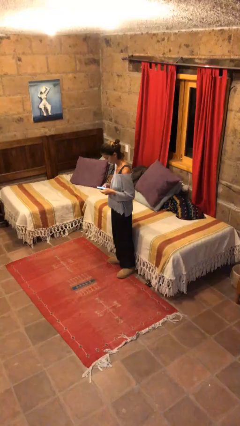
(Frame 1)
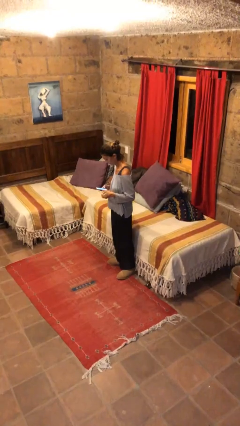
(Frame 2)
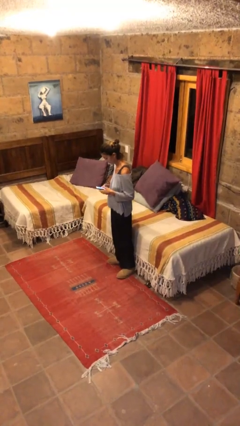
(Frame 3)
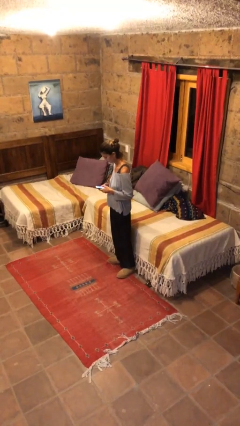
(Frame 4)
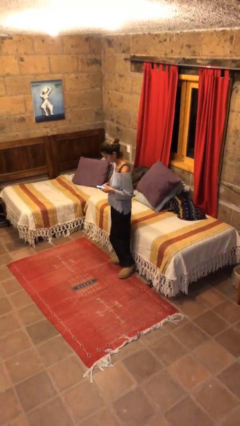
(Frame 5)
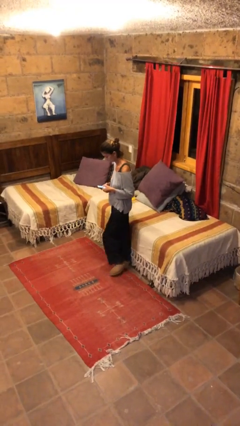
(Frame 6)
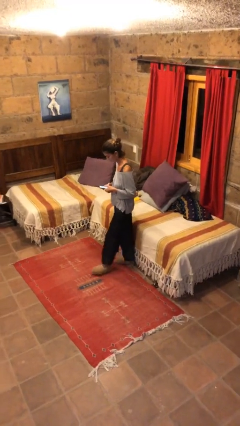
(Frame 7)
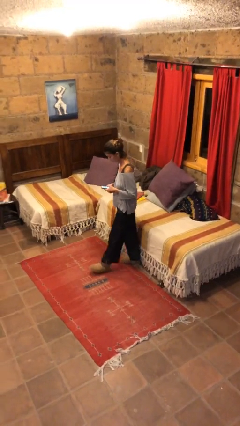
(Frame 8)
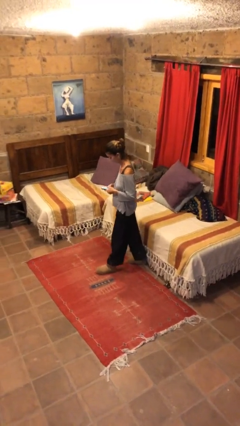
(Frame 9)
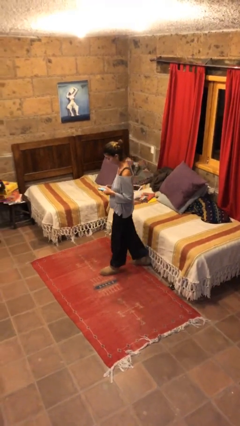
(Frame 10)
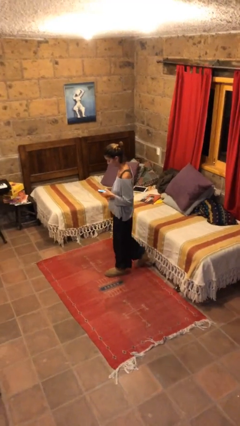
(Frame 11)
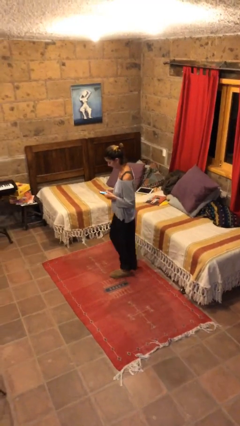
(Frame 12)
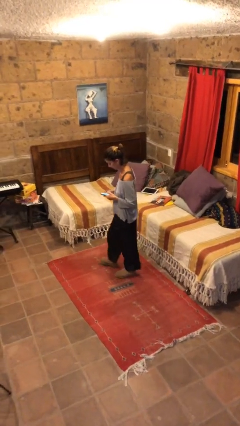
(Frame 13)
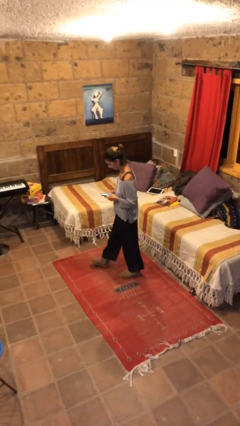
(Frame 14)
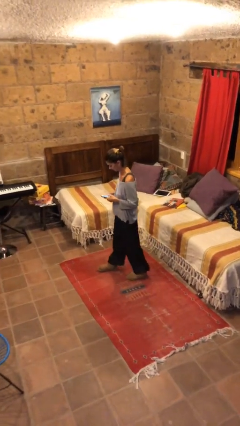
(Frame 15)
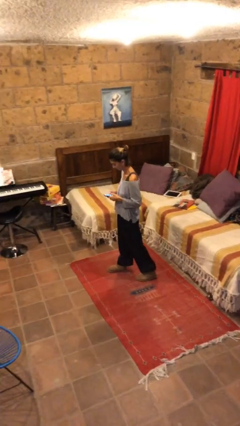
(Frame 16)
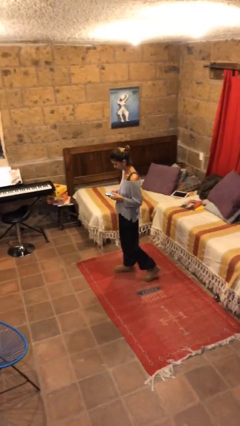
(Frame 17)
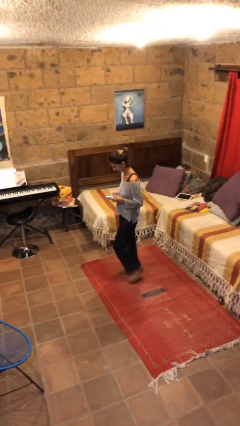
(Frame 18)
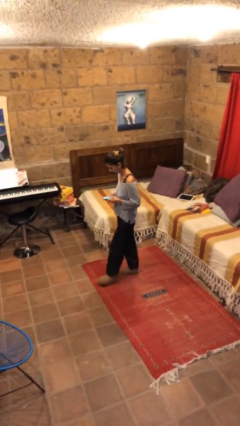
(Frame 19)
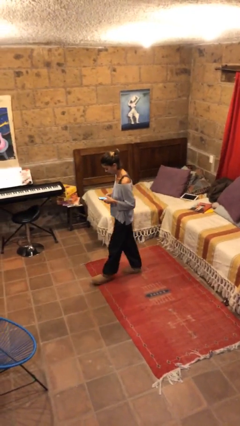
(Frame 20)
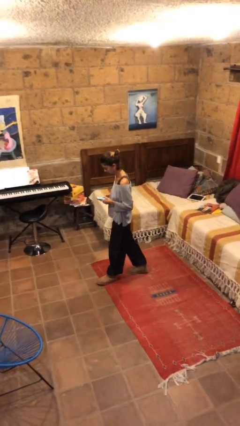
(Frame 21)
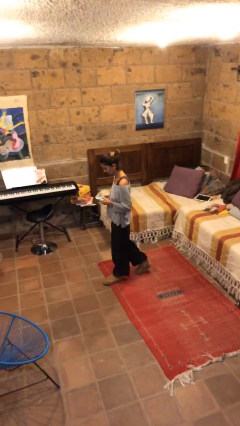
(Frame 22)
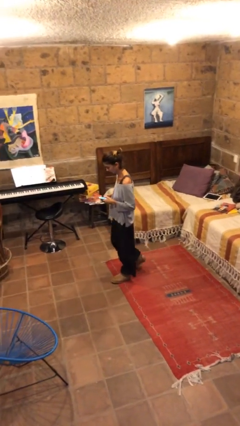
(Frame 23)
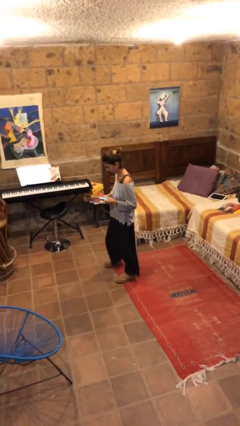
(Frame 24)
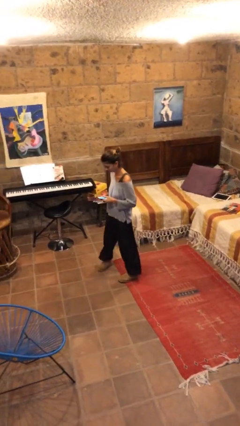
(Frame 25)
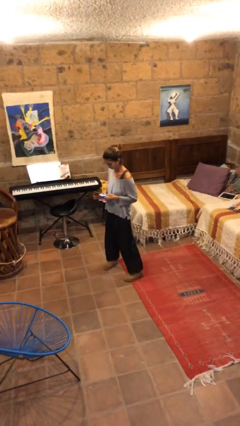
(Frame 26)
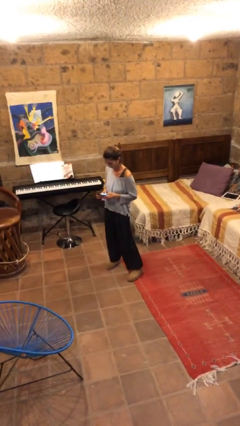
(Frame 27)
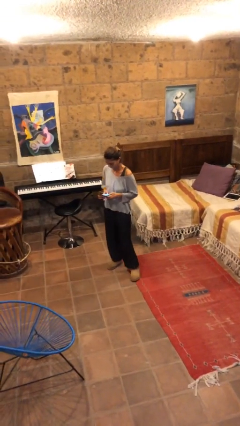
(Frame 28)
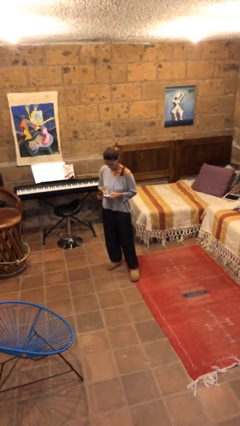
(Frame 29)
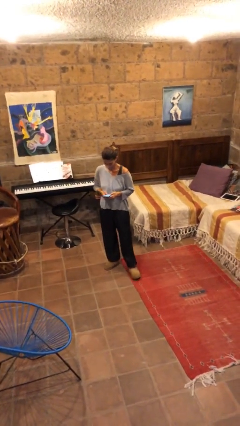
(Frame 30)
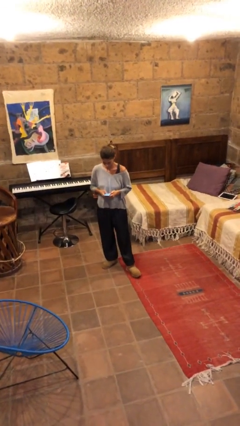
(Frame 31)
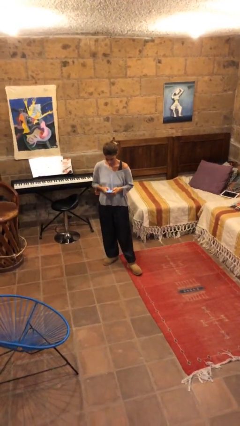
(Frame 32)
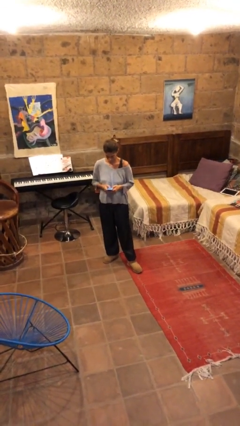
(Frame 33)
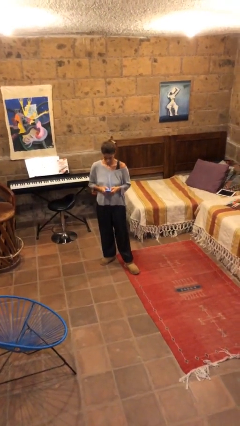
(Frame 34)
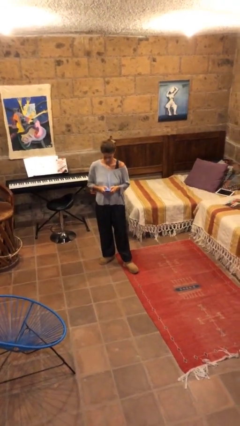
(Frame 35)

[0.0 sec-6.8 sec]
person texts on phone

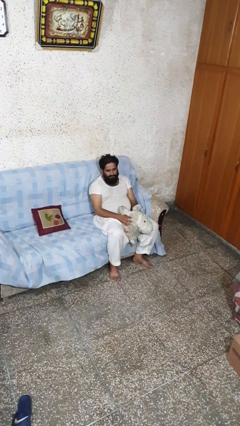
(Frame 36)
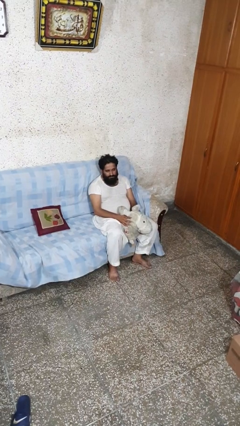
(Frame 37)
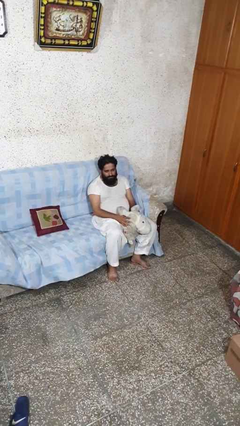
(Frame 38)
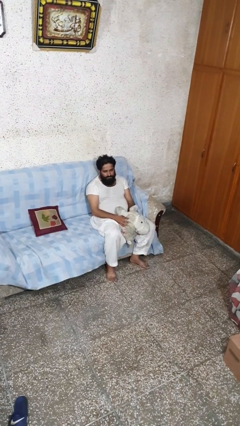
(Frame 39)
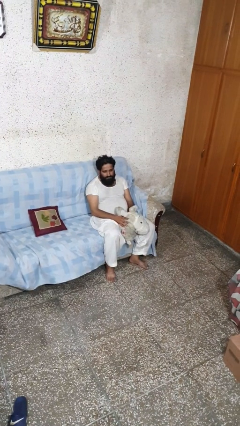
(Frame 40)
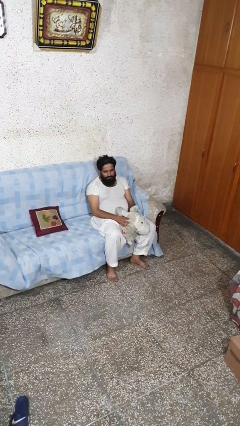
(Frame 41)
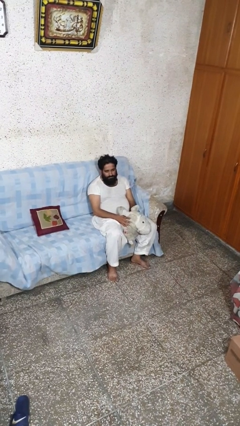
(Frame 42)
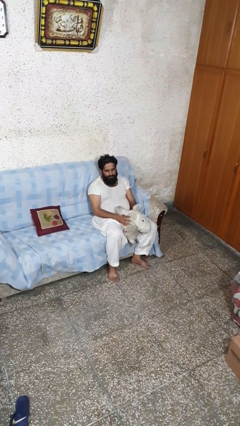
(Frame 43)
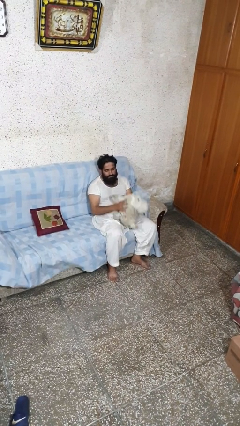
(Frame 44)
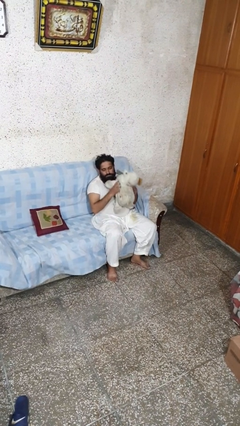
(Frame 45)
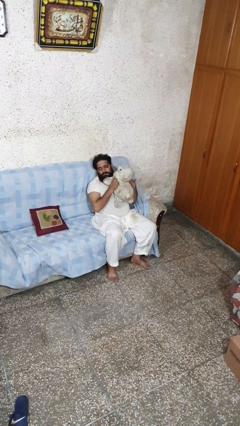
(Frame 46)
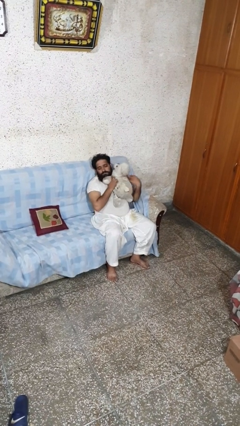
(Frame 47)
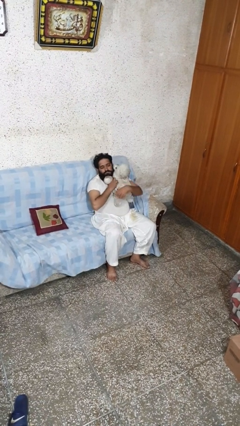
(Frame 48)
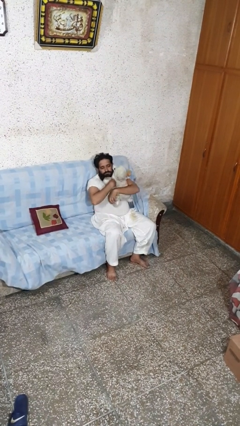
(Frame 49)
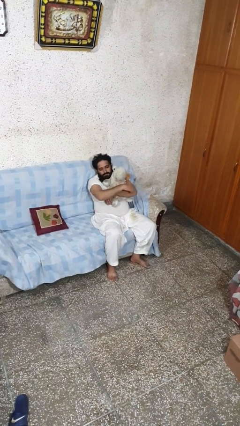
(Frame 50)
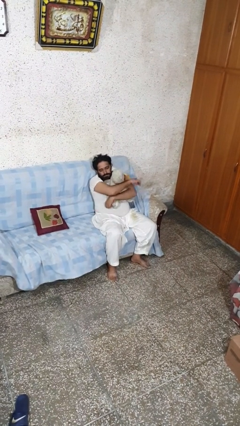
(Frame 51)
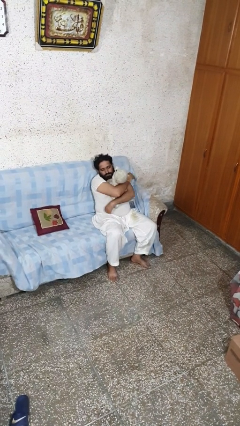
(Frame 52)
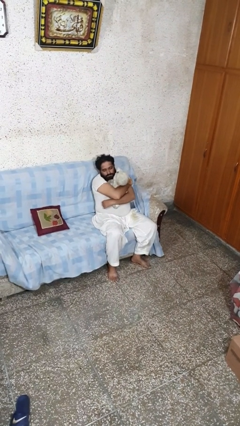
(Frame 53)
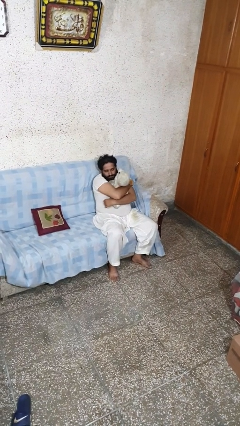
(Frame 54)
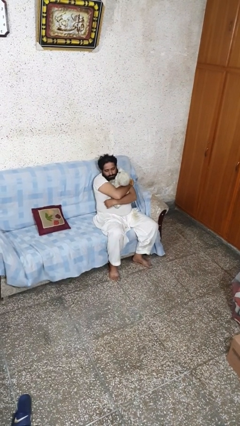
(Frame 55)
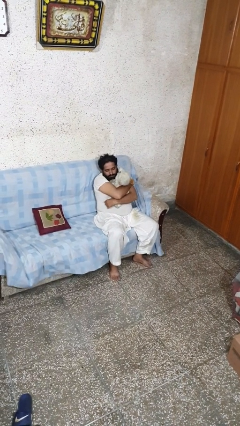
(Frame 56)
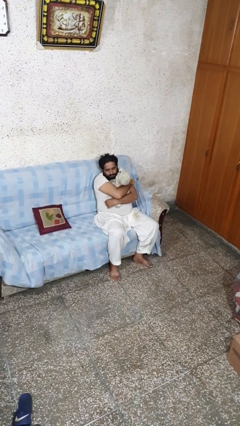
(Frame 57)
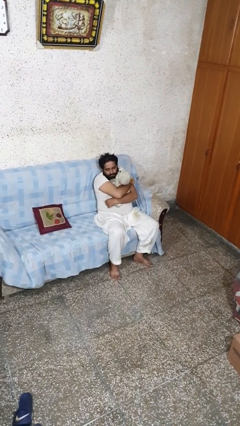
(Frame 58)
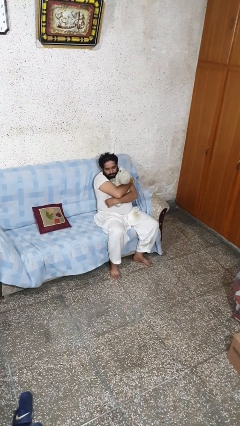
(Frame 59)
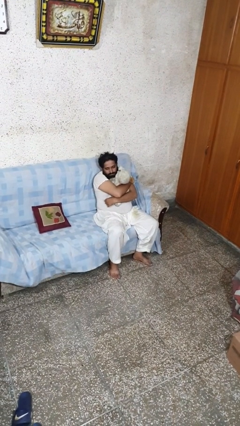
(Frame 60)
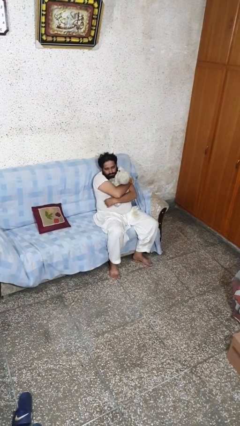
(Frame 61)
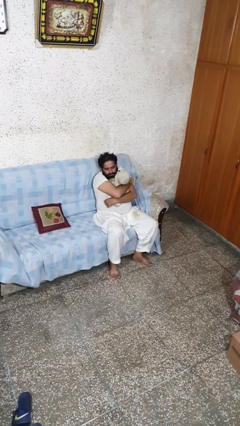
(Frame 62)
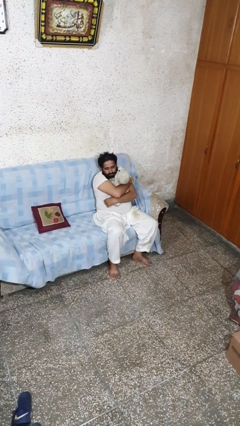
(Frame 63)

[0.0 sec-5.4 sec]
person hugs stuffed animal

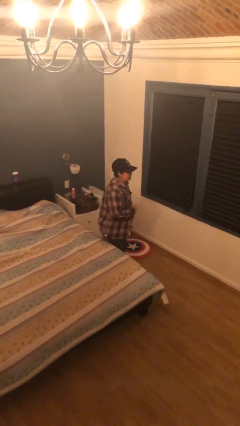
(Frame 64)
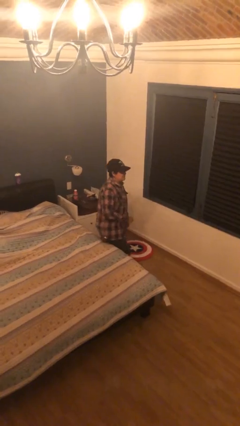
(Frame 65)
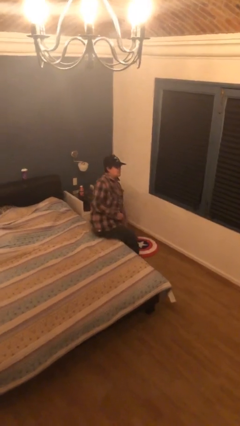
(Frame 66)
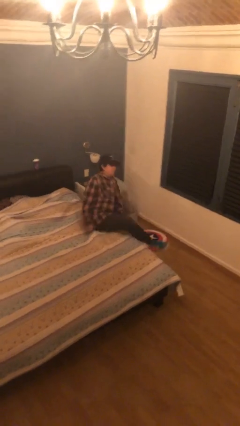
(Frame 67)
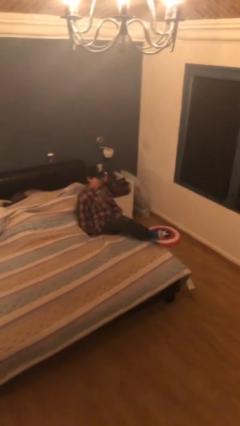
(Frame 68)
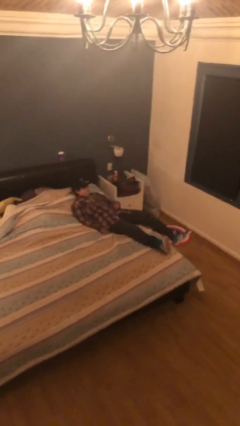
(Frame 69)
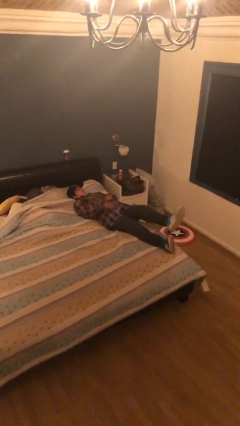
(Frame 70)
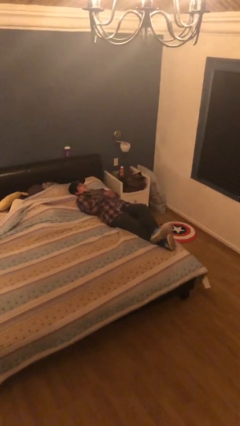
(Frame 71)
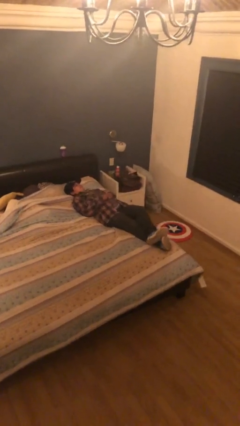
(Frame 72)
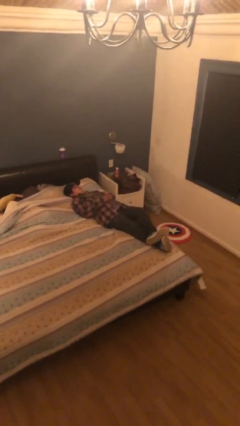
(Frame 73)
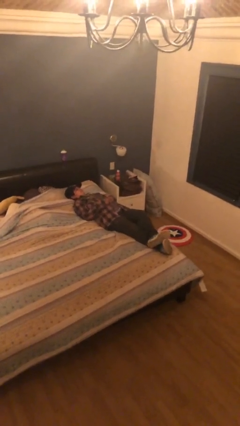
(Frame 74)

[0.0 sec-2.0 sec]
person lies down on bed

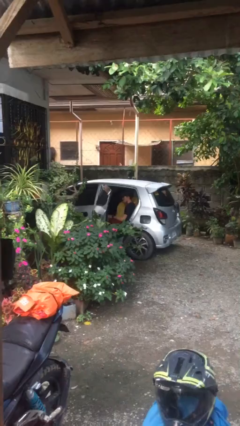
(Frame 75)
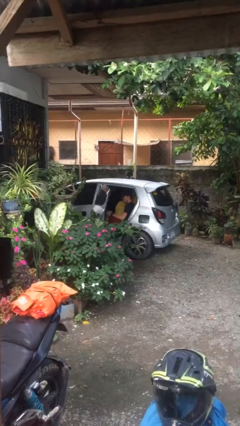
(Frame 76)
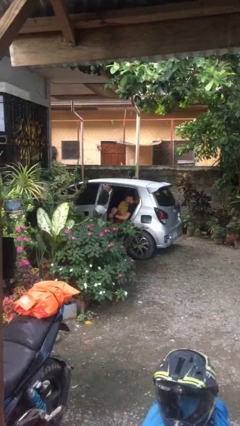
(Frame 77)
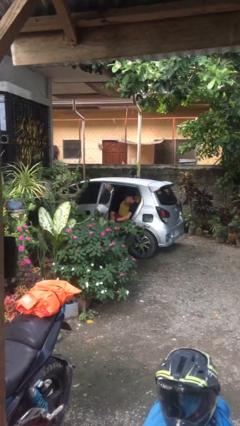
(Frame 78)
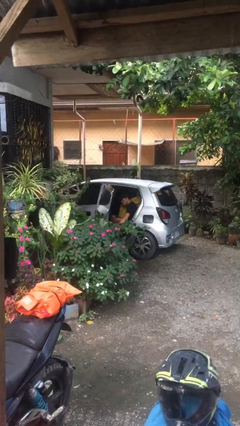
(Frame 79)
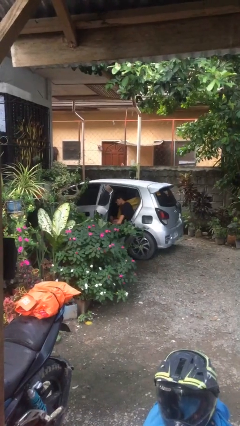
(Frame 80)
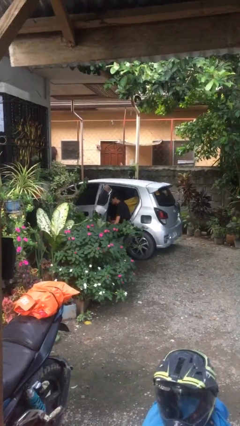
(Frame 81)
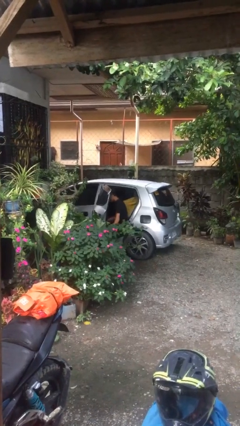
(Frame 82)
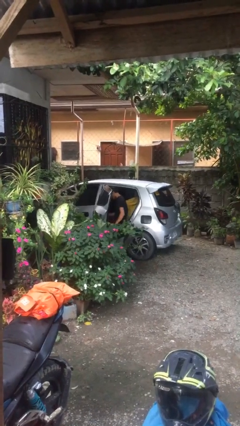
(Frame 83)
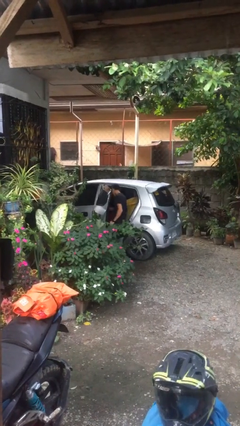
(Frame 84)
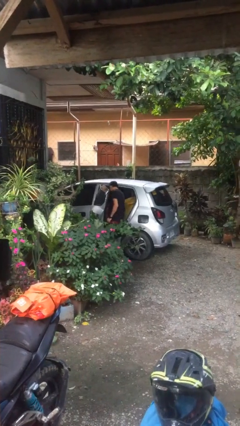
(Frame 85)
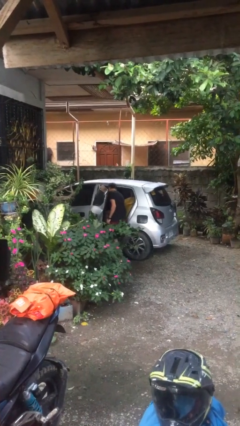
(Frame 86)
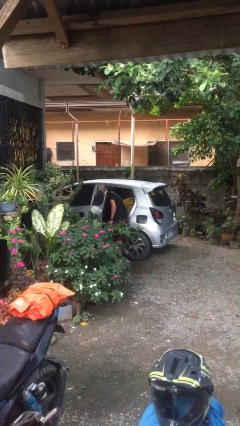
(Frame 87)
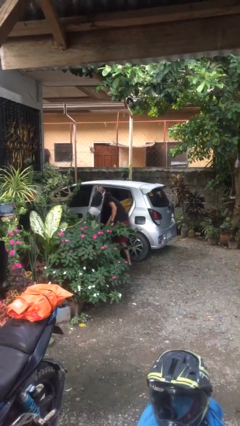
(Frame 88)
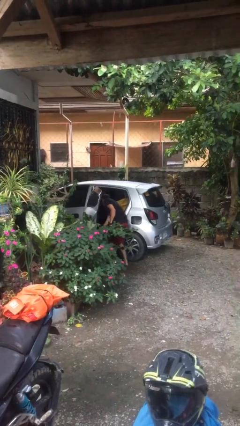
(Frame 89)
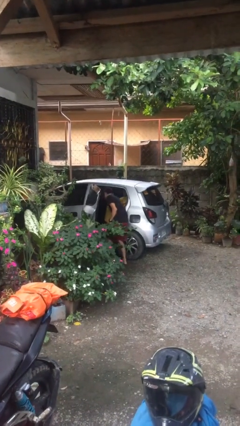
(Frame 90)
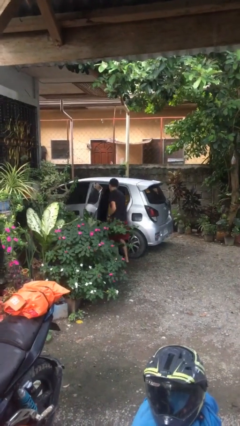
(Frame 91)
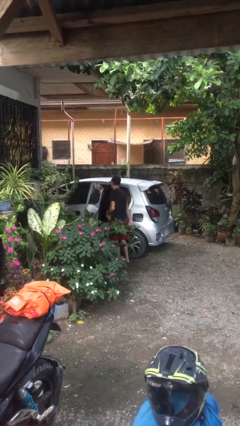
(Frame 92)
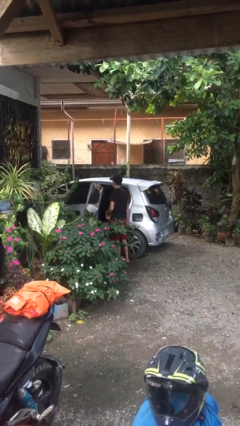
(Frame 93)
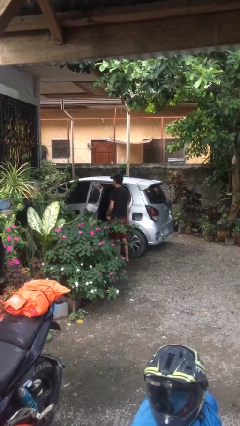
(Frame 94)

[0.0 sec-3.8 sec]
person exits car
